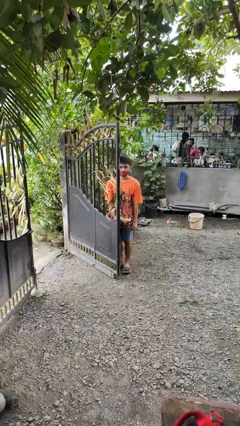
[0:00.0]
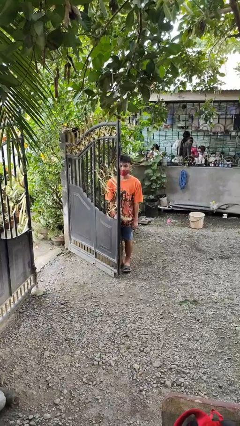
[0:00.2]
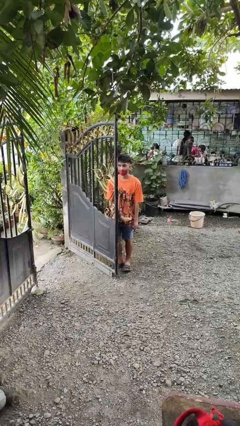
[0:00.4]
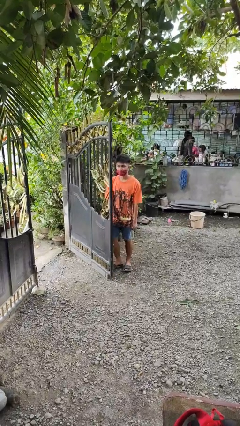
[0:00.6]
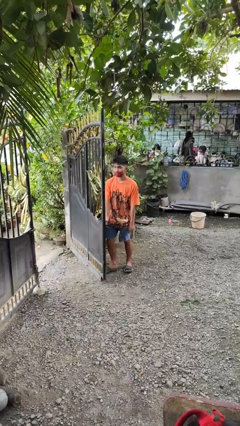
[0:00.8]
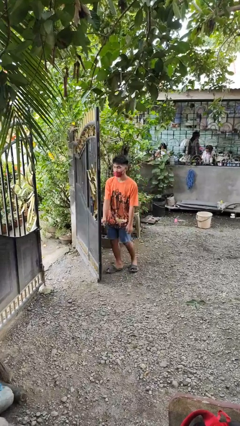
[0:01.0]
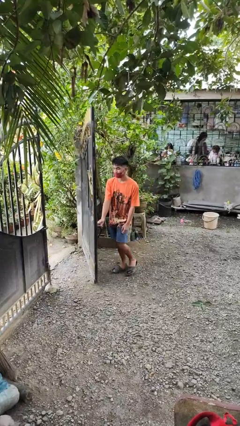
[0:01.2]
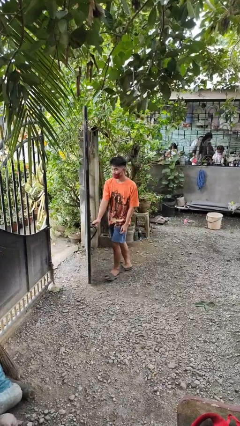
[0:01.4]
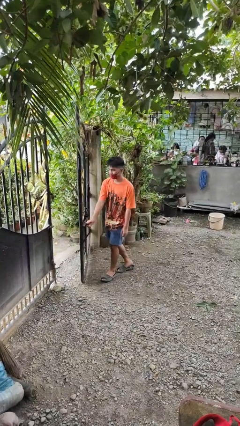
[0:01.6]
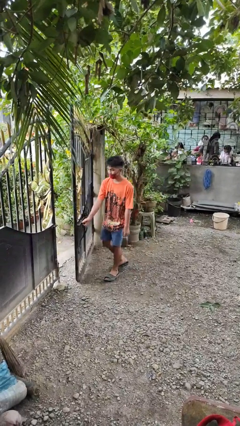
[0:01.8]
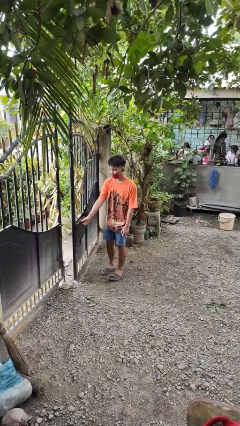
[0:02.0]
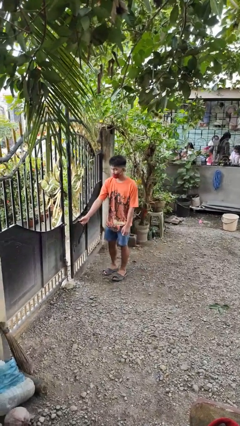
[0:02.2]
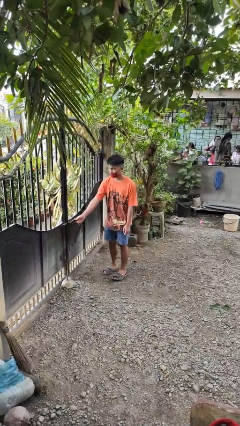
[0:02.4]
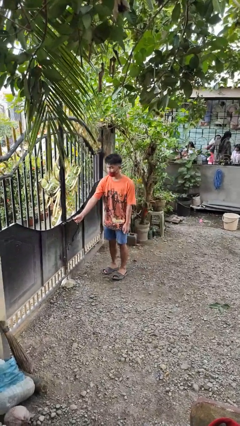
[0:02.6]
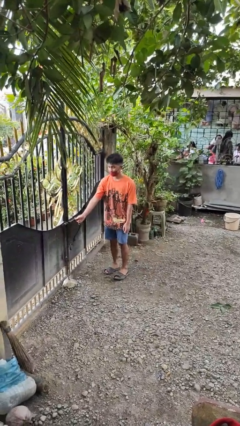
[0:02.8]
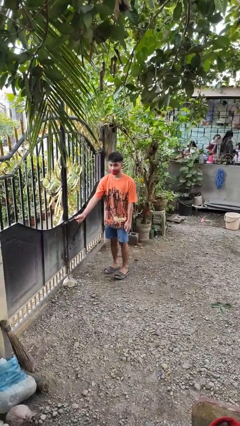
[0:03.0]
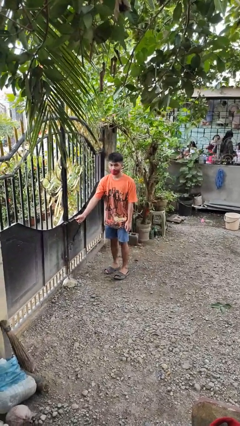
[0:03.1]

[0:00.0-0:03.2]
person closes gate

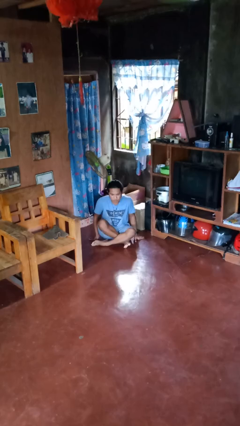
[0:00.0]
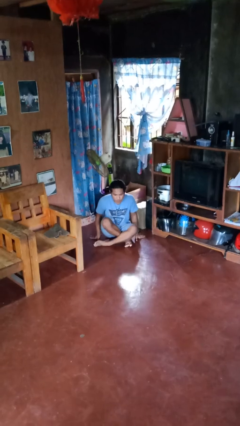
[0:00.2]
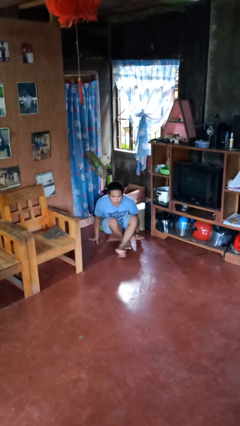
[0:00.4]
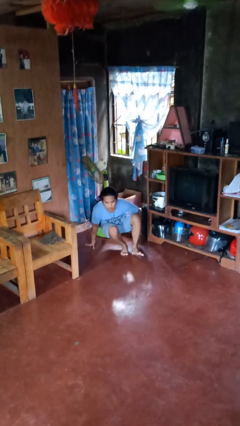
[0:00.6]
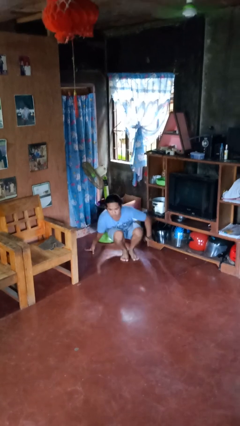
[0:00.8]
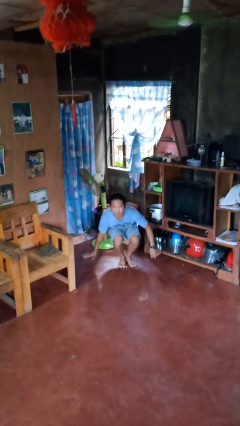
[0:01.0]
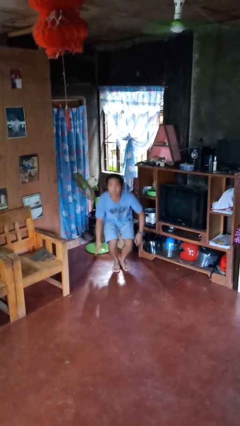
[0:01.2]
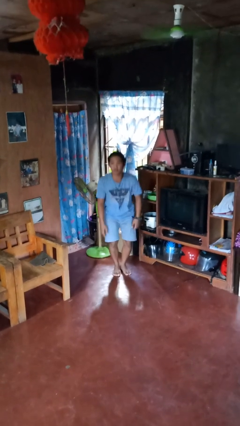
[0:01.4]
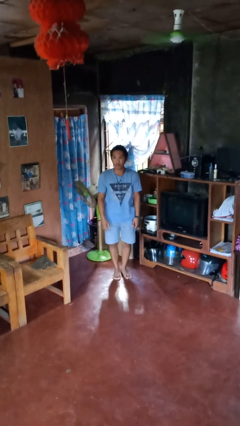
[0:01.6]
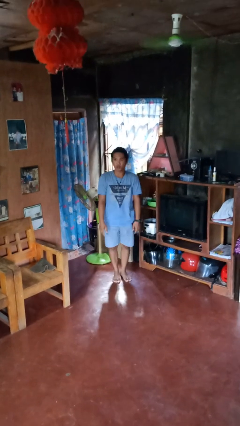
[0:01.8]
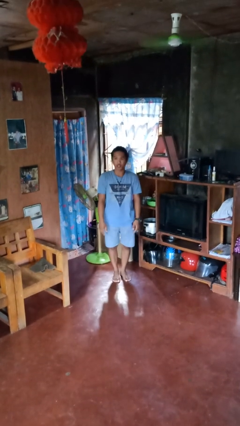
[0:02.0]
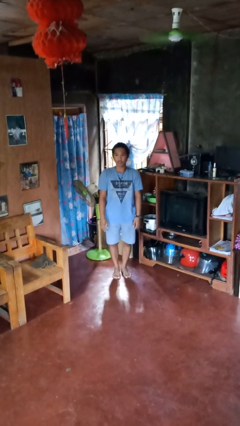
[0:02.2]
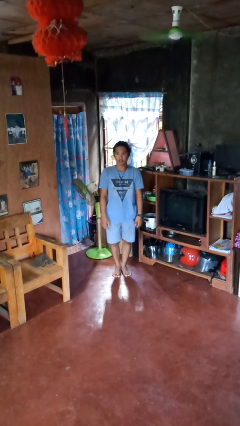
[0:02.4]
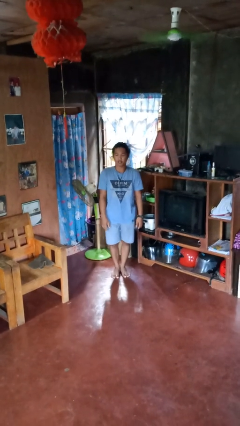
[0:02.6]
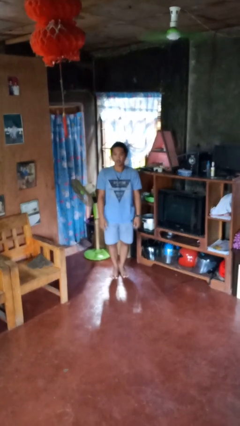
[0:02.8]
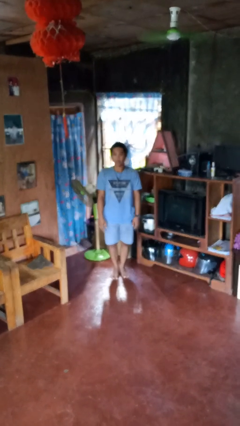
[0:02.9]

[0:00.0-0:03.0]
person stands up from floor

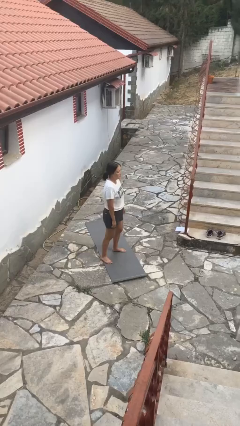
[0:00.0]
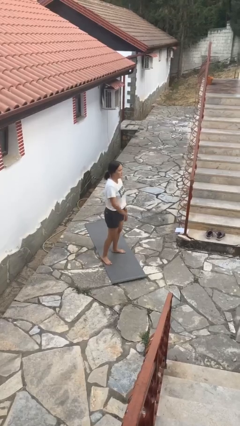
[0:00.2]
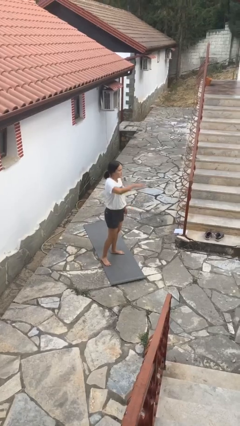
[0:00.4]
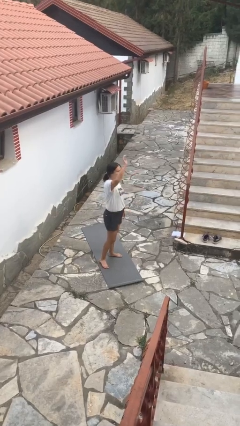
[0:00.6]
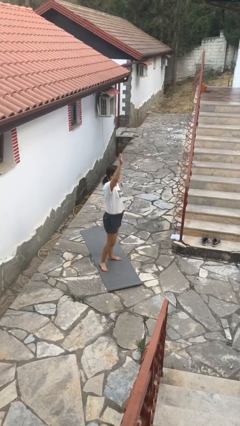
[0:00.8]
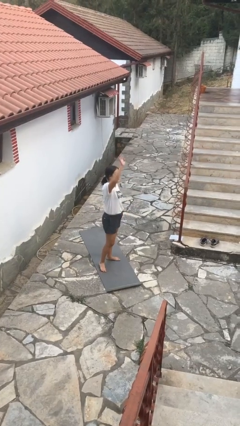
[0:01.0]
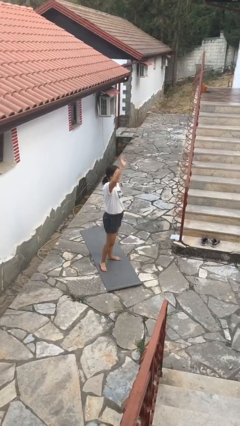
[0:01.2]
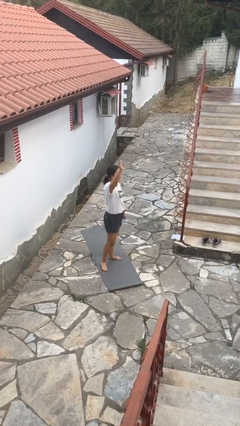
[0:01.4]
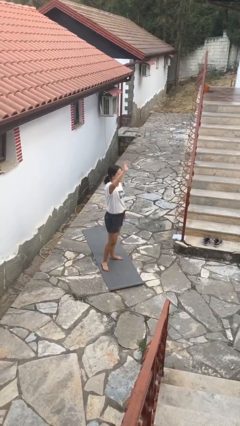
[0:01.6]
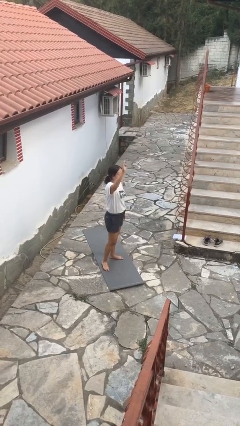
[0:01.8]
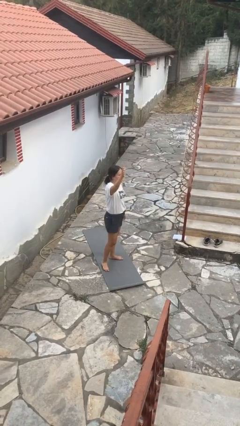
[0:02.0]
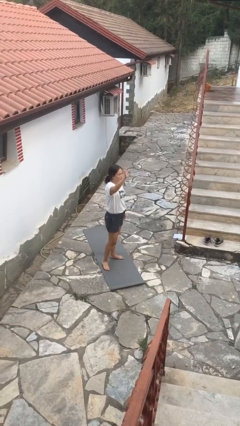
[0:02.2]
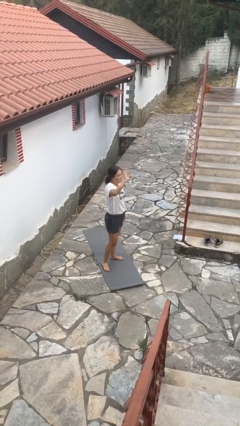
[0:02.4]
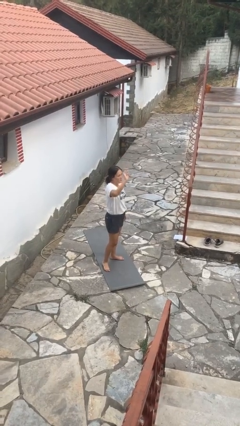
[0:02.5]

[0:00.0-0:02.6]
person gestures raise hand

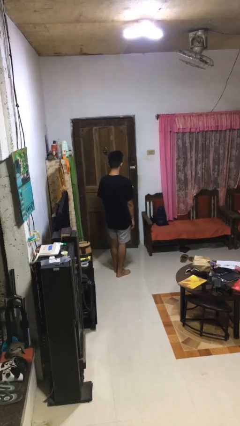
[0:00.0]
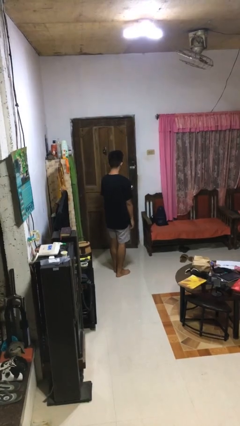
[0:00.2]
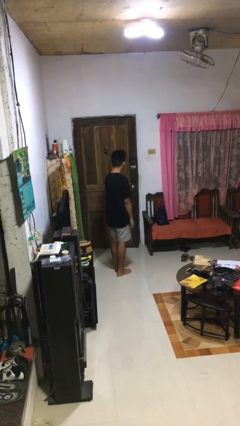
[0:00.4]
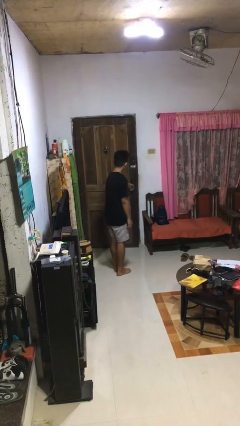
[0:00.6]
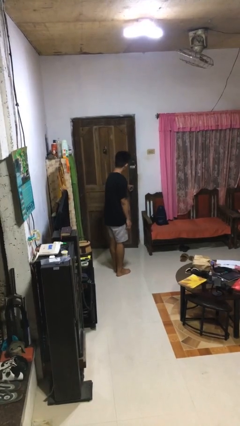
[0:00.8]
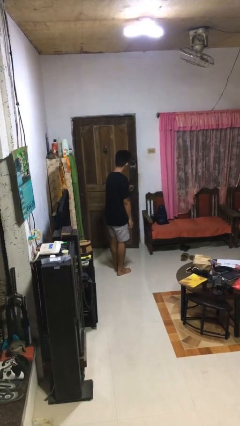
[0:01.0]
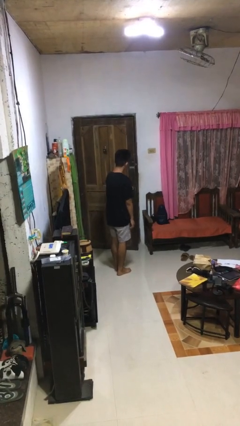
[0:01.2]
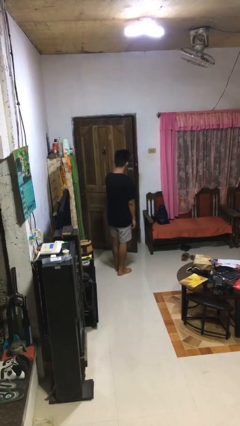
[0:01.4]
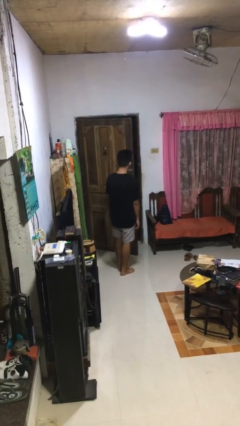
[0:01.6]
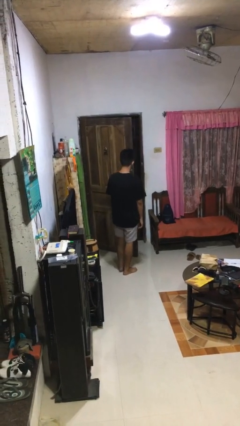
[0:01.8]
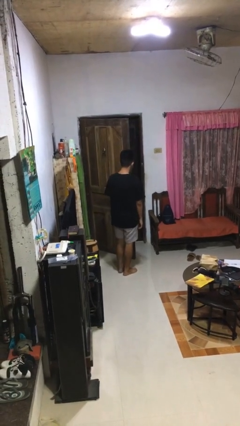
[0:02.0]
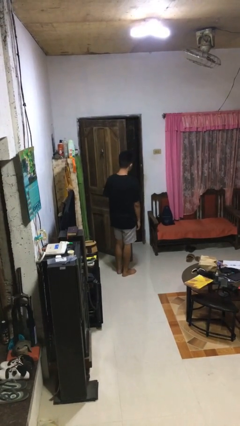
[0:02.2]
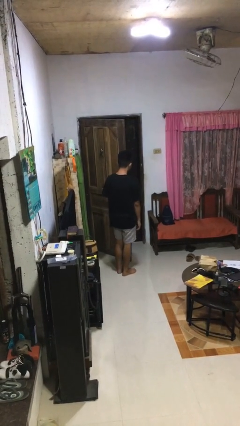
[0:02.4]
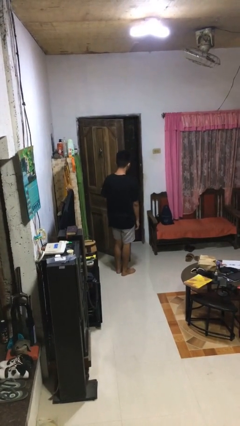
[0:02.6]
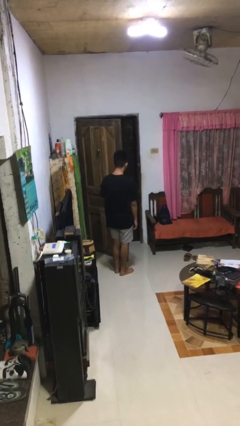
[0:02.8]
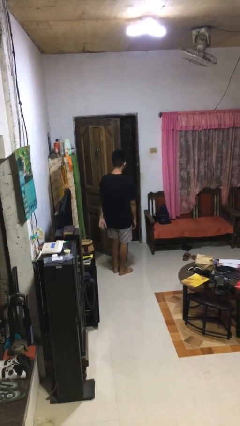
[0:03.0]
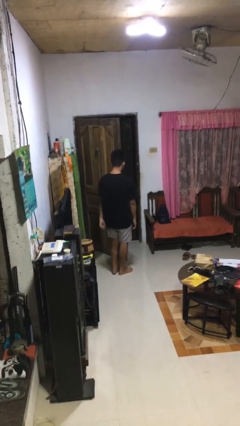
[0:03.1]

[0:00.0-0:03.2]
person opens facility door

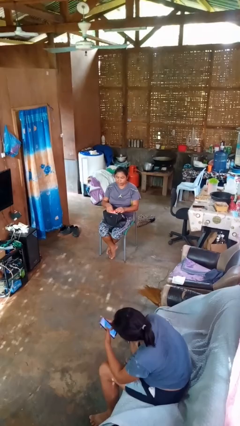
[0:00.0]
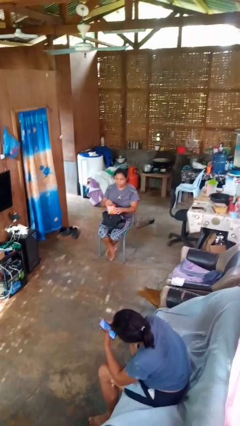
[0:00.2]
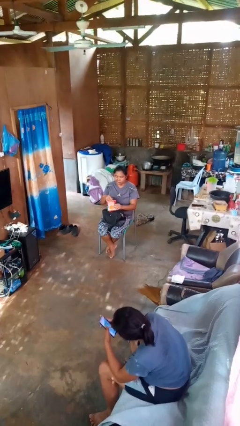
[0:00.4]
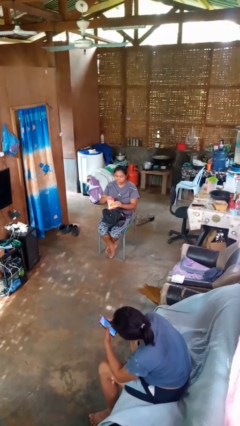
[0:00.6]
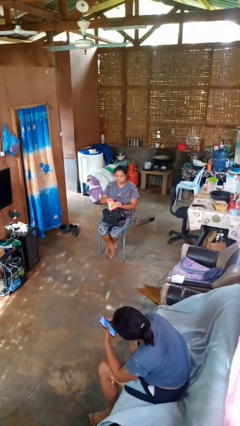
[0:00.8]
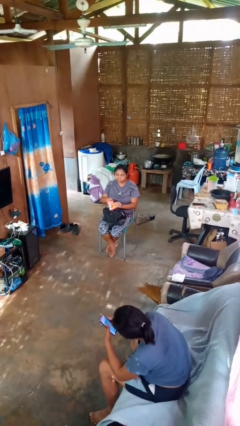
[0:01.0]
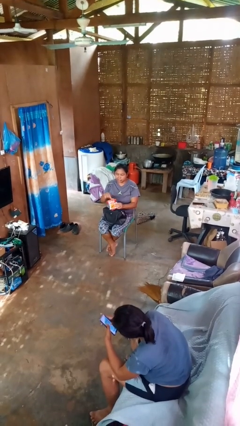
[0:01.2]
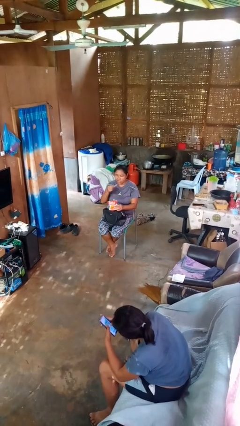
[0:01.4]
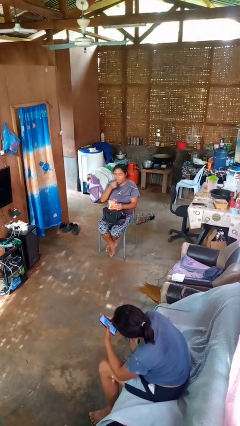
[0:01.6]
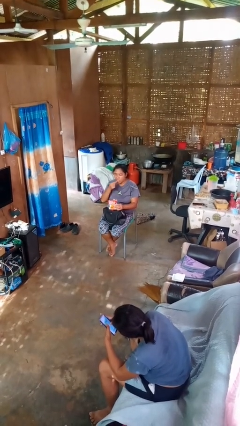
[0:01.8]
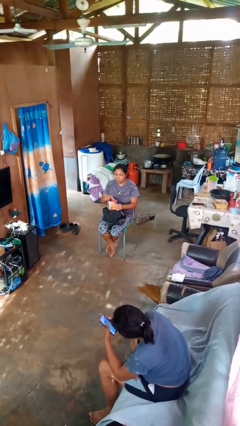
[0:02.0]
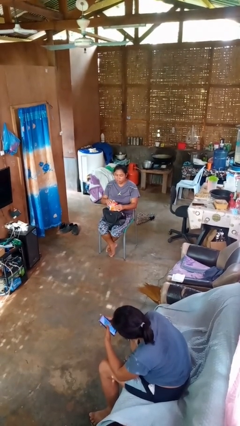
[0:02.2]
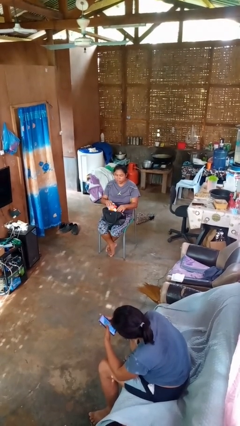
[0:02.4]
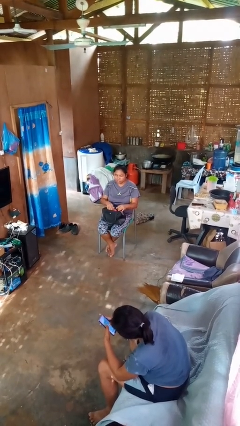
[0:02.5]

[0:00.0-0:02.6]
person eats snack from bag

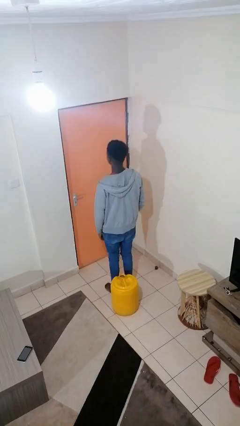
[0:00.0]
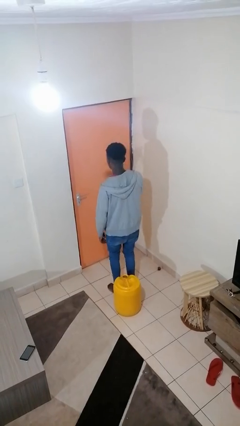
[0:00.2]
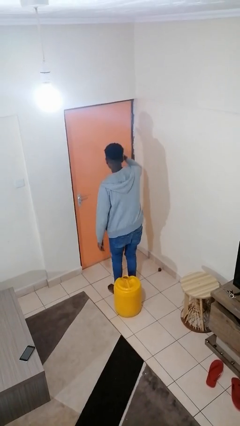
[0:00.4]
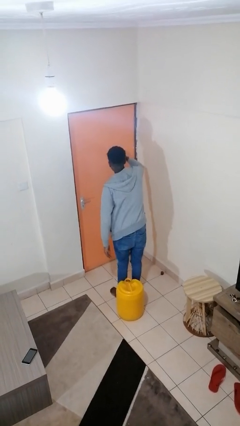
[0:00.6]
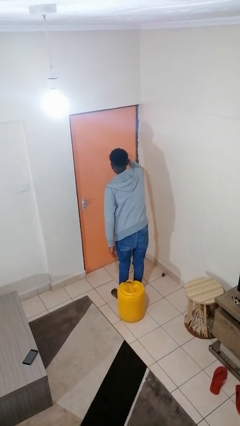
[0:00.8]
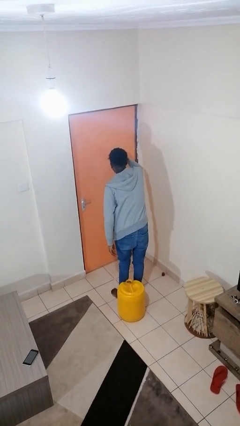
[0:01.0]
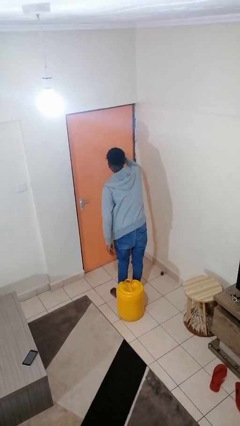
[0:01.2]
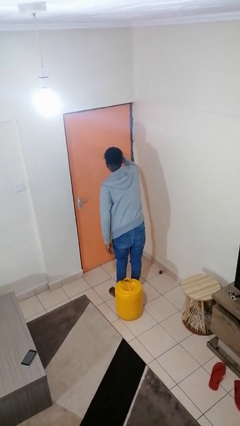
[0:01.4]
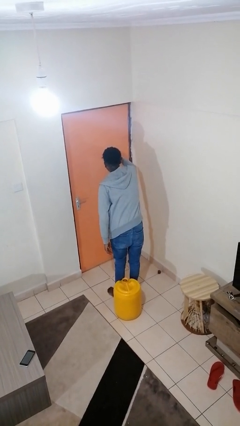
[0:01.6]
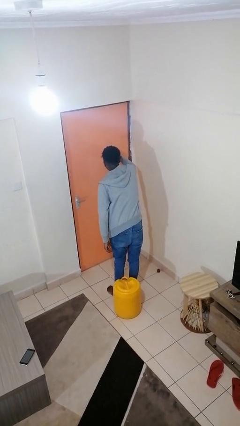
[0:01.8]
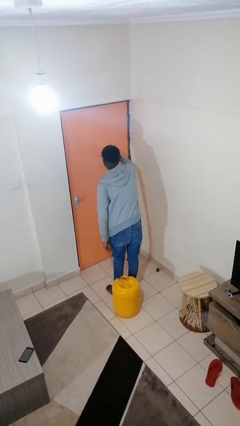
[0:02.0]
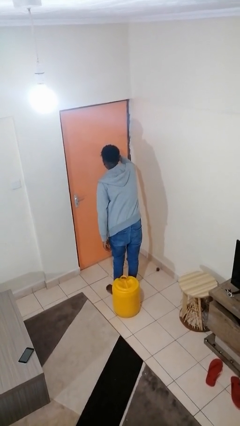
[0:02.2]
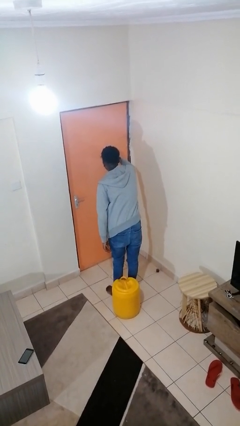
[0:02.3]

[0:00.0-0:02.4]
person shades eyes

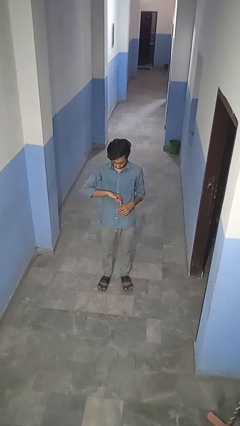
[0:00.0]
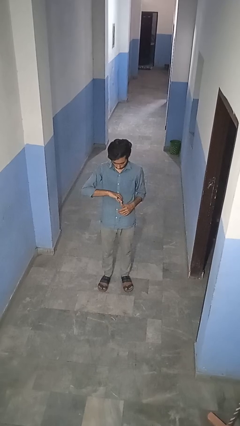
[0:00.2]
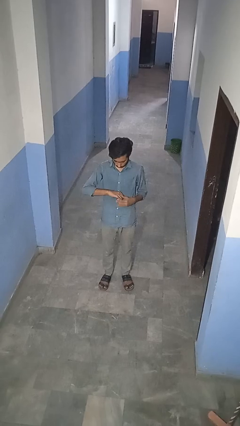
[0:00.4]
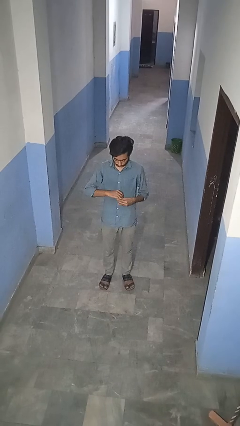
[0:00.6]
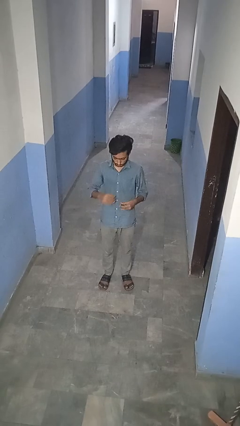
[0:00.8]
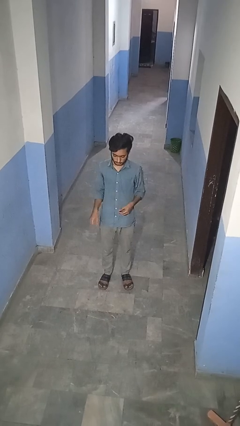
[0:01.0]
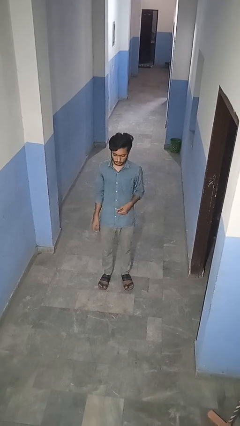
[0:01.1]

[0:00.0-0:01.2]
person takes off ring
